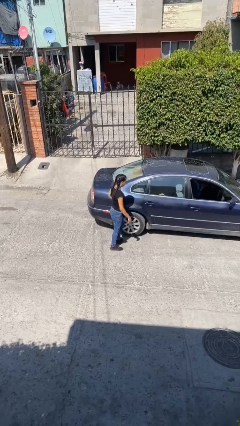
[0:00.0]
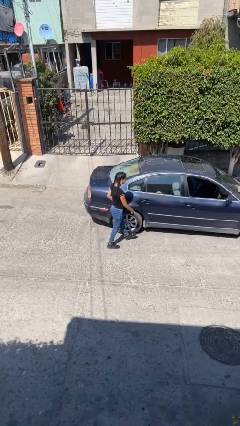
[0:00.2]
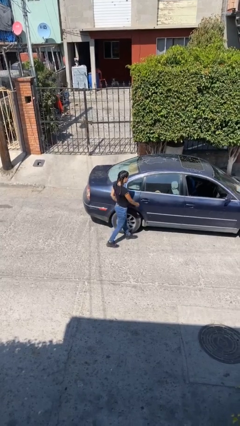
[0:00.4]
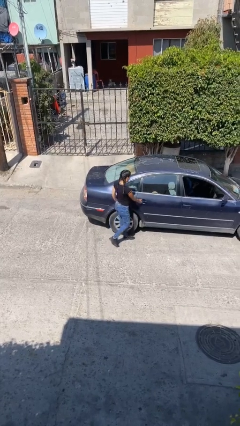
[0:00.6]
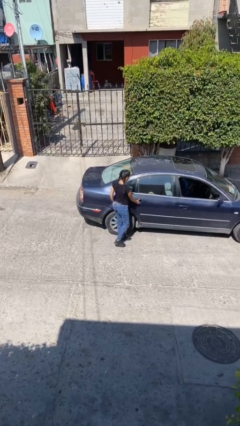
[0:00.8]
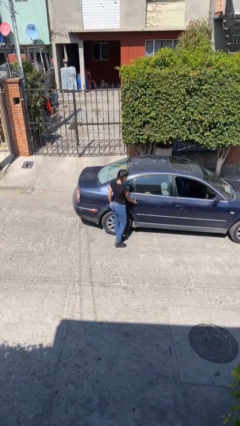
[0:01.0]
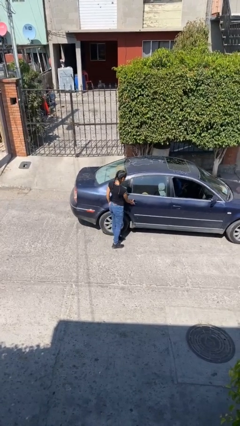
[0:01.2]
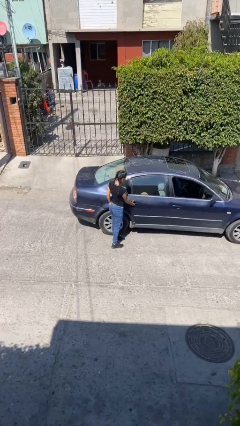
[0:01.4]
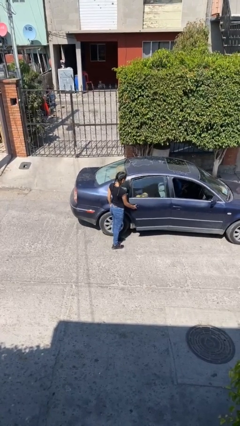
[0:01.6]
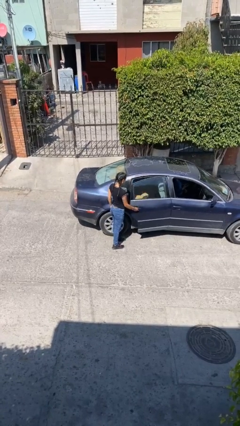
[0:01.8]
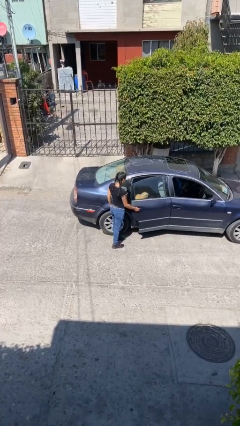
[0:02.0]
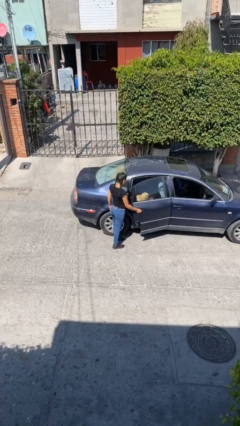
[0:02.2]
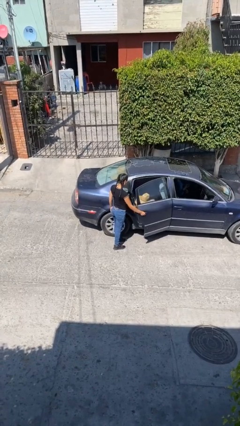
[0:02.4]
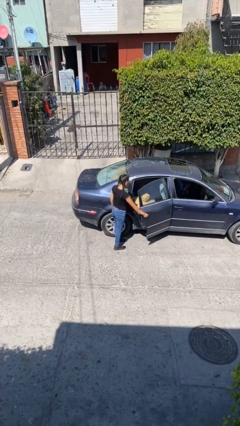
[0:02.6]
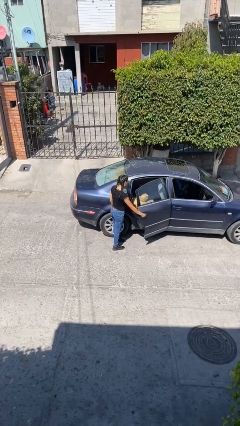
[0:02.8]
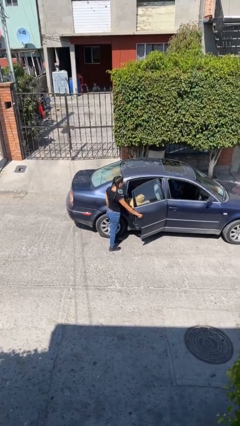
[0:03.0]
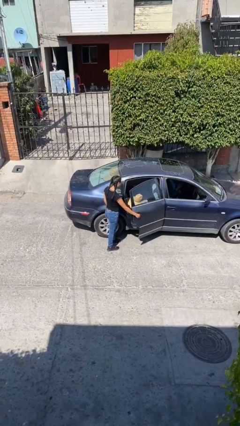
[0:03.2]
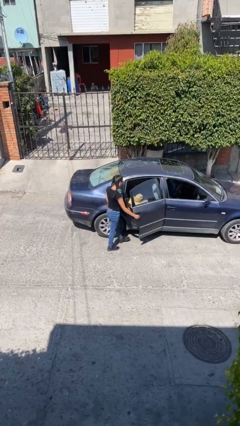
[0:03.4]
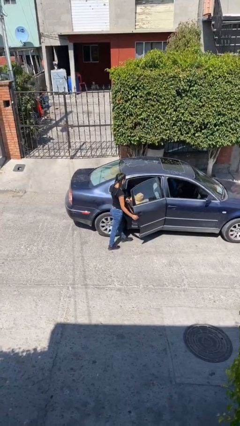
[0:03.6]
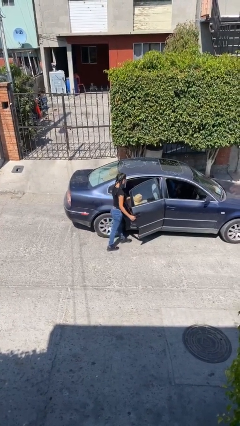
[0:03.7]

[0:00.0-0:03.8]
person opens car door

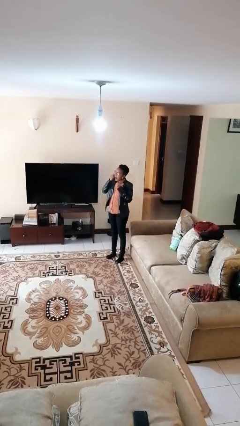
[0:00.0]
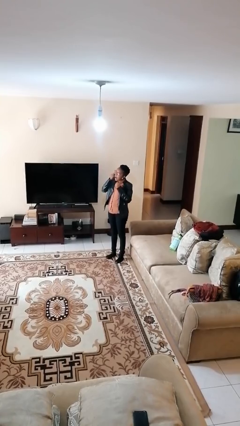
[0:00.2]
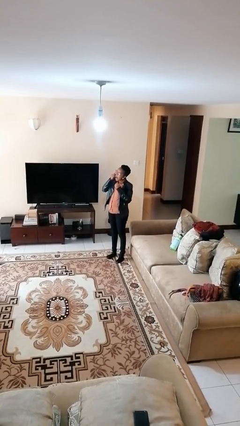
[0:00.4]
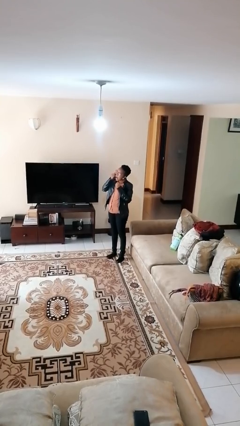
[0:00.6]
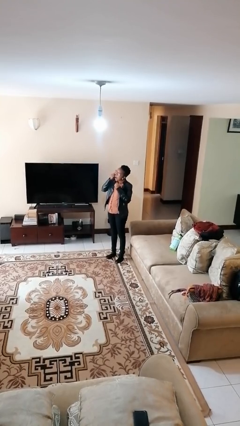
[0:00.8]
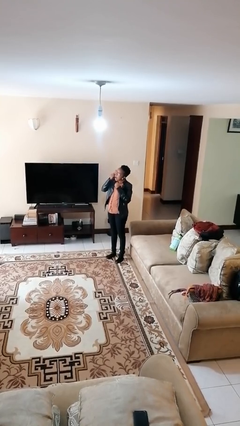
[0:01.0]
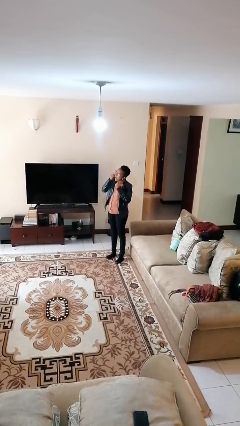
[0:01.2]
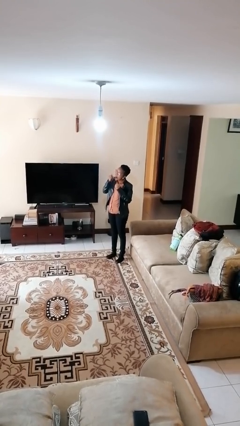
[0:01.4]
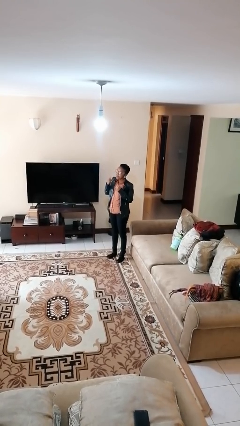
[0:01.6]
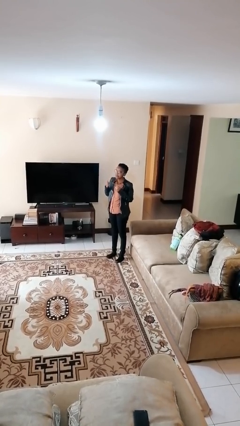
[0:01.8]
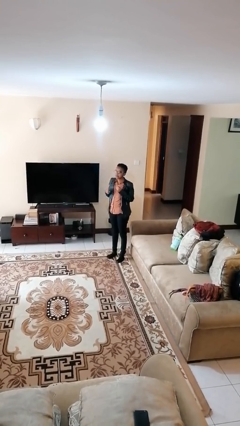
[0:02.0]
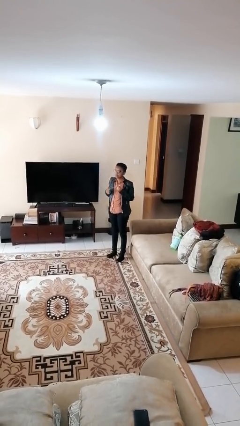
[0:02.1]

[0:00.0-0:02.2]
person flosses

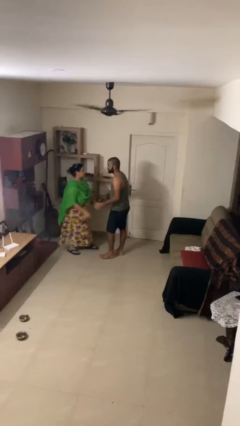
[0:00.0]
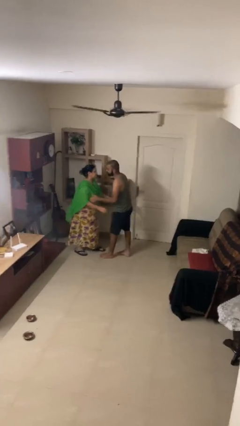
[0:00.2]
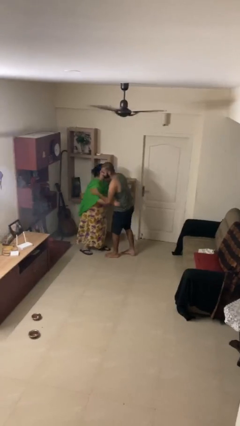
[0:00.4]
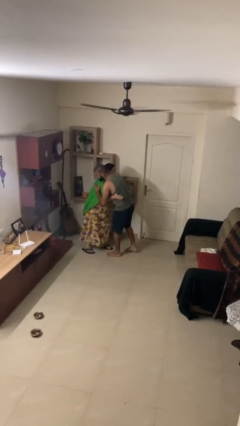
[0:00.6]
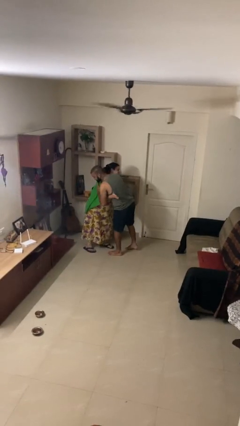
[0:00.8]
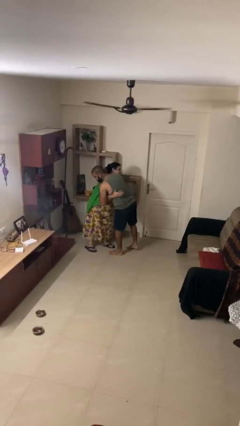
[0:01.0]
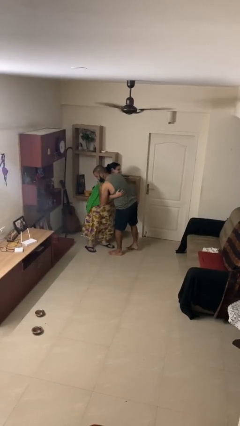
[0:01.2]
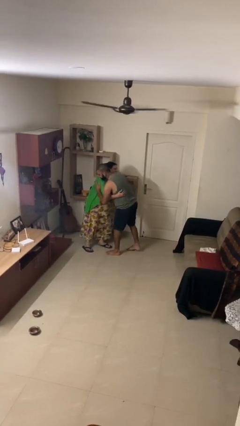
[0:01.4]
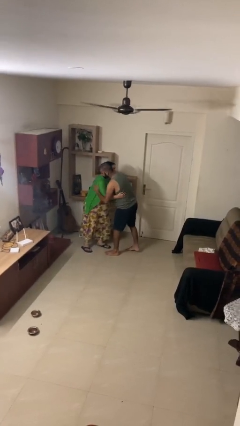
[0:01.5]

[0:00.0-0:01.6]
person embraces person

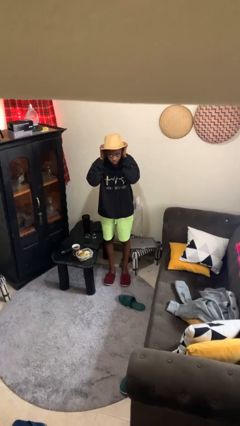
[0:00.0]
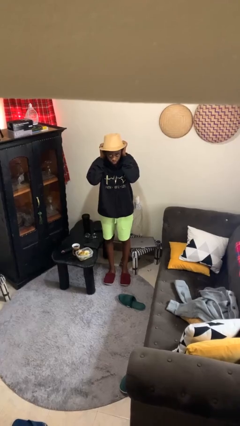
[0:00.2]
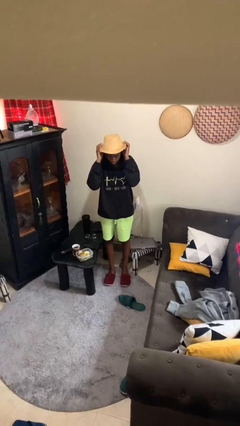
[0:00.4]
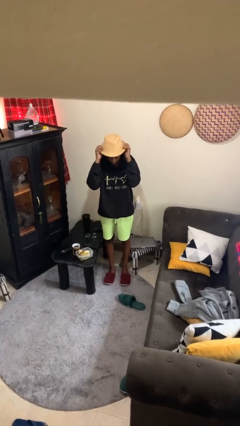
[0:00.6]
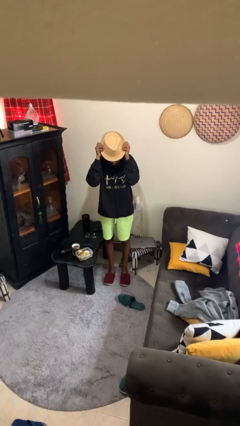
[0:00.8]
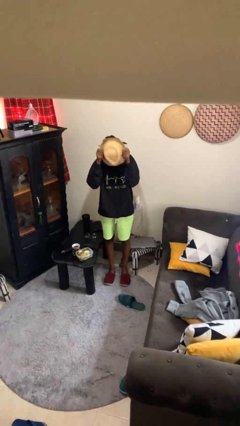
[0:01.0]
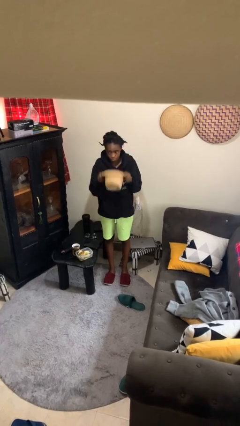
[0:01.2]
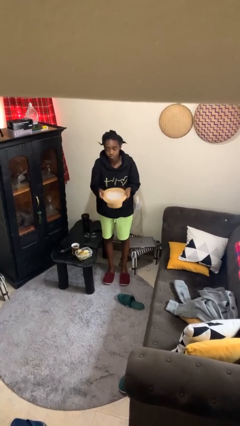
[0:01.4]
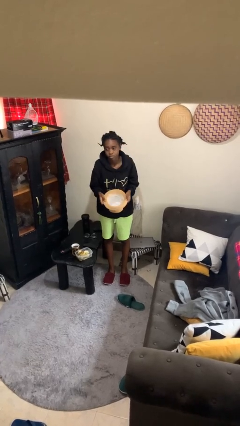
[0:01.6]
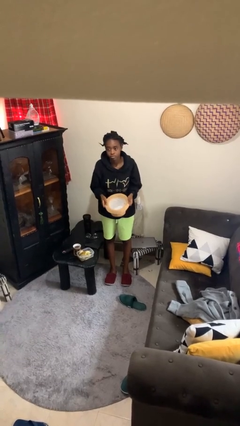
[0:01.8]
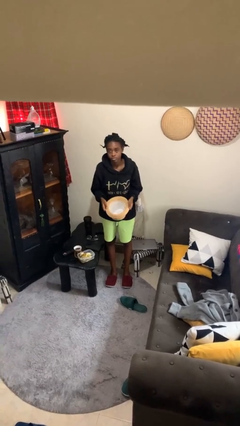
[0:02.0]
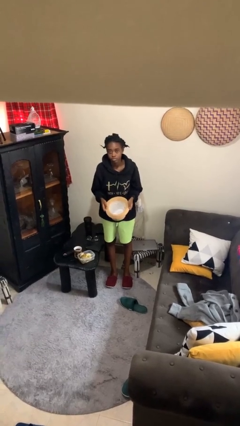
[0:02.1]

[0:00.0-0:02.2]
person takes off hat

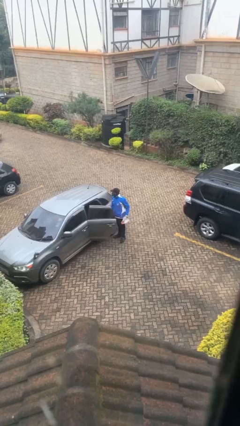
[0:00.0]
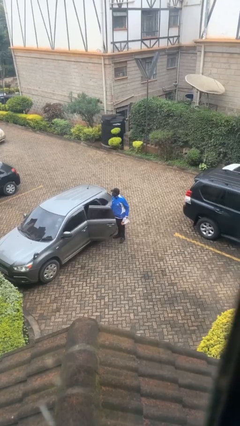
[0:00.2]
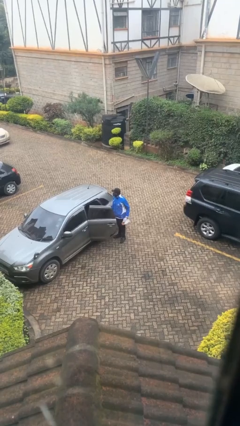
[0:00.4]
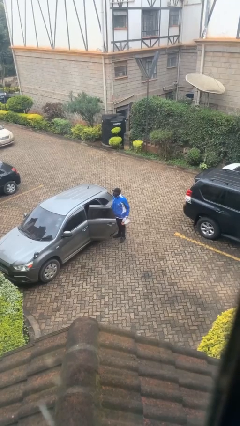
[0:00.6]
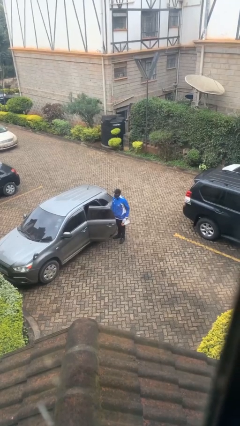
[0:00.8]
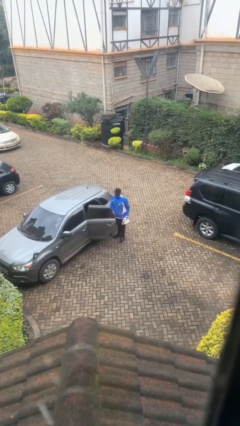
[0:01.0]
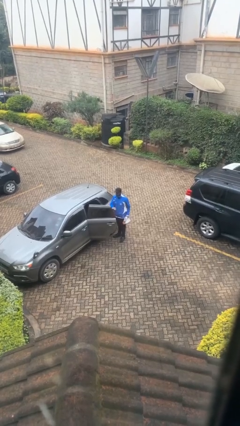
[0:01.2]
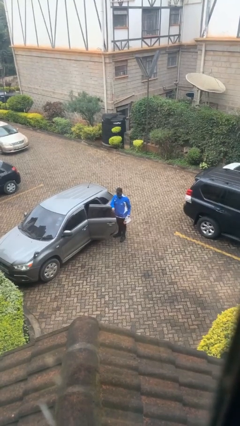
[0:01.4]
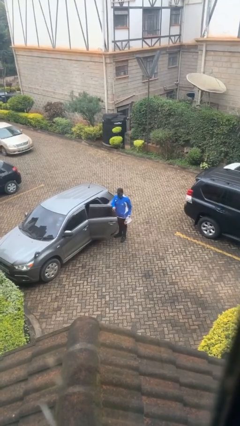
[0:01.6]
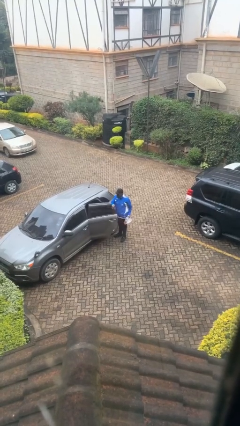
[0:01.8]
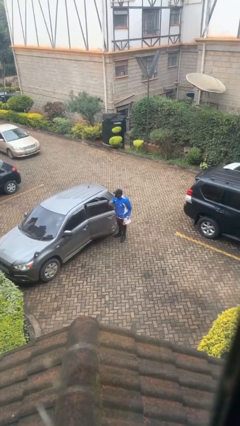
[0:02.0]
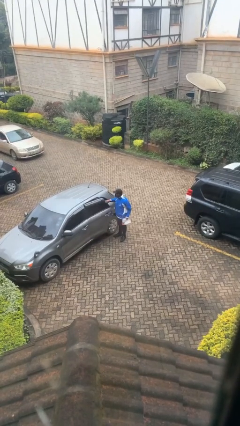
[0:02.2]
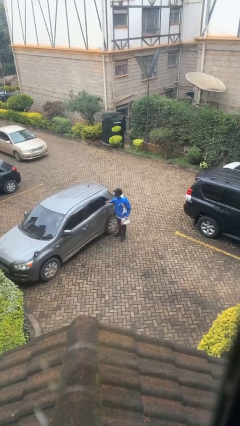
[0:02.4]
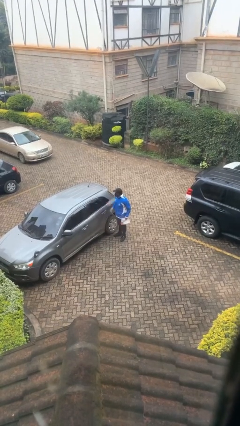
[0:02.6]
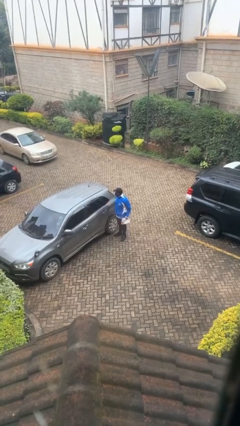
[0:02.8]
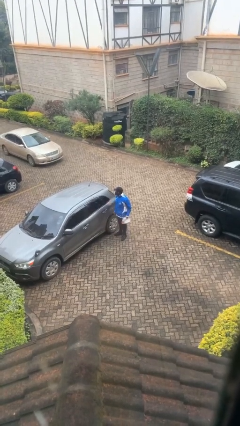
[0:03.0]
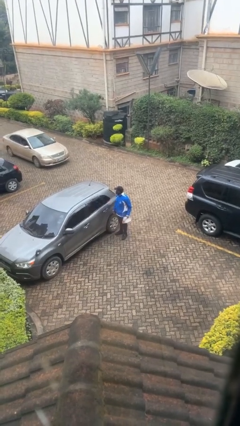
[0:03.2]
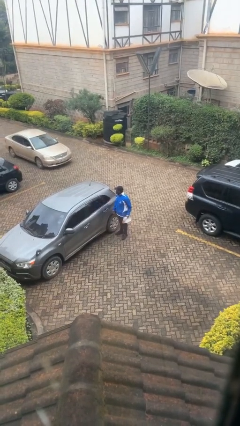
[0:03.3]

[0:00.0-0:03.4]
person closes car door

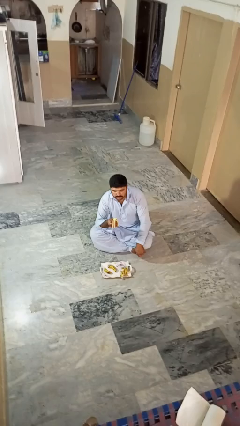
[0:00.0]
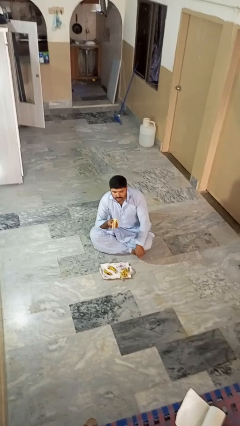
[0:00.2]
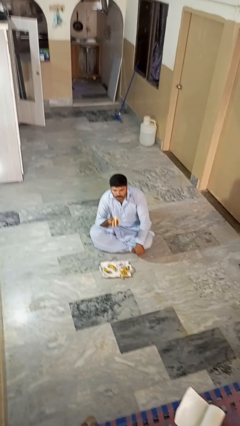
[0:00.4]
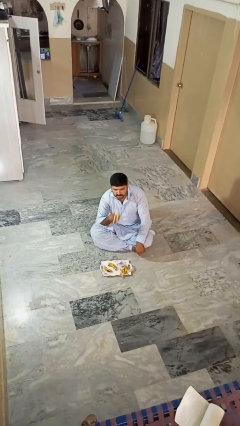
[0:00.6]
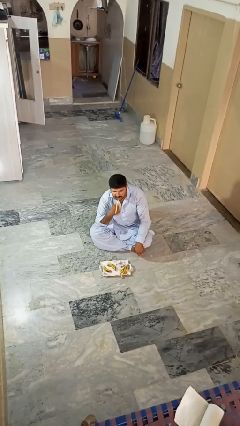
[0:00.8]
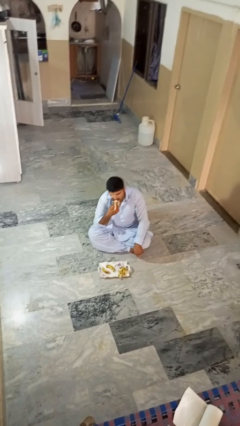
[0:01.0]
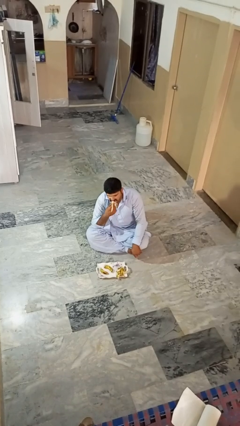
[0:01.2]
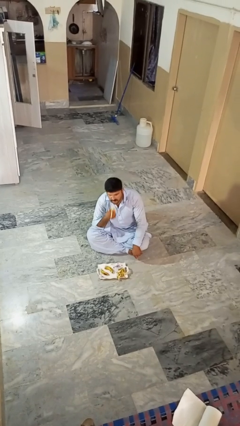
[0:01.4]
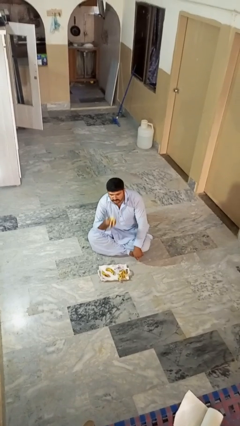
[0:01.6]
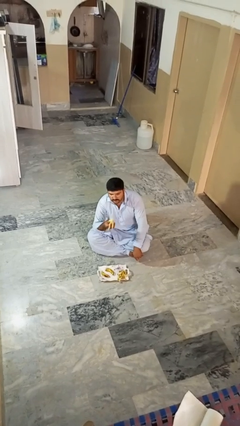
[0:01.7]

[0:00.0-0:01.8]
person eats banana

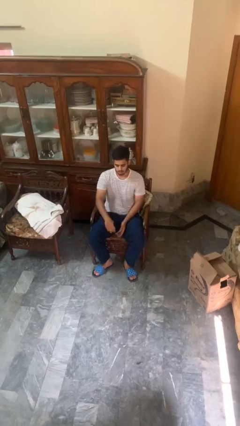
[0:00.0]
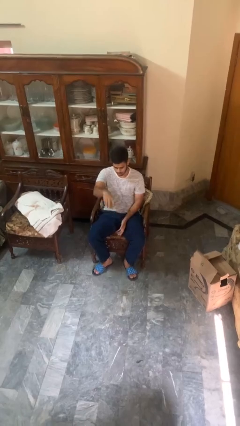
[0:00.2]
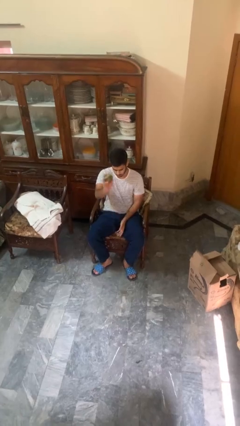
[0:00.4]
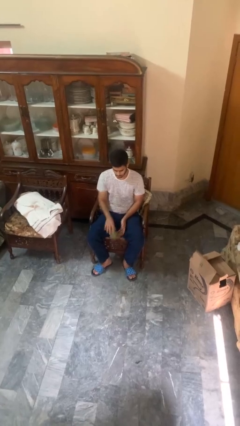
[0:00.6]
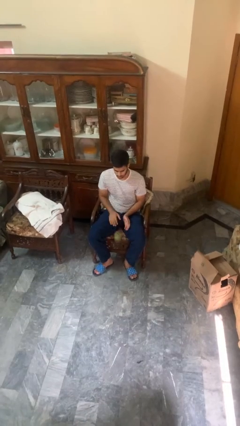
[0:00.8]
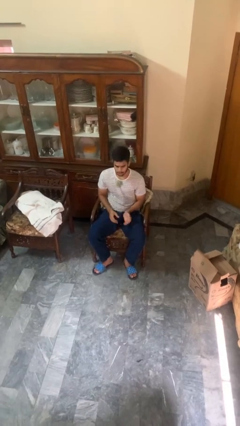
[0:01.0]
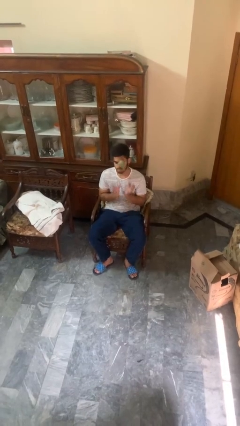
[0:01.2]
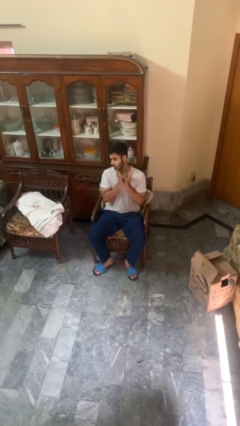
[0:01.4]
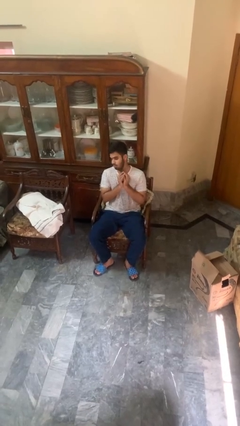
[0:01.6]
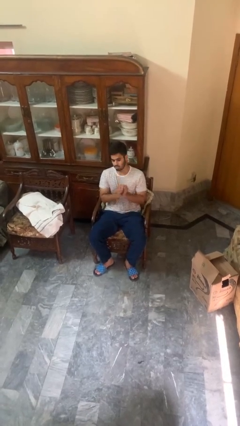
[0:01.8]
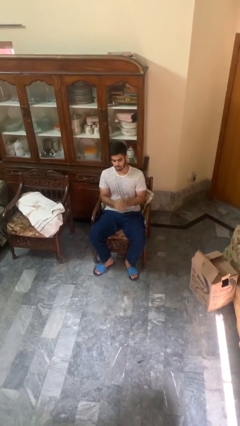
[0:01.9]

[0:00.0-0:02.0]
person bounces ball on floor
